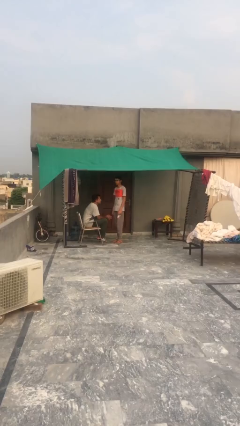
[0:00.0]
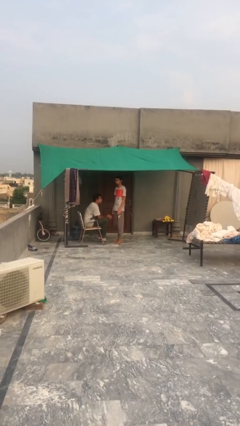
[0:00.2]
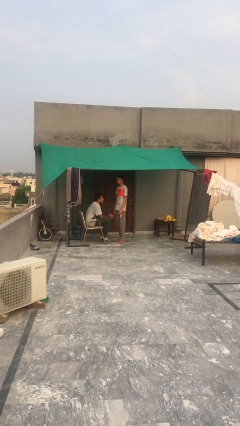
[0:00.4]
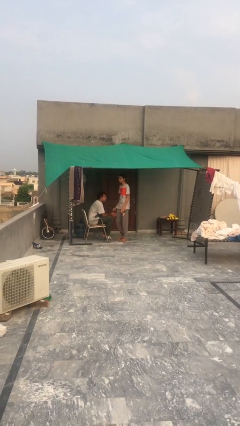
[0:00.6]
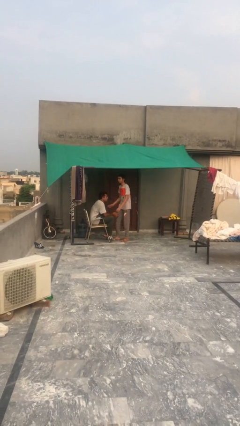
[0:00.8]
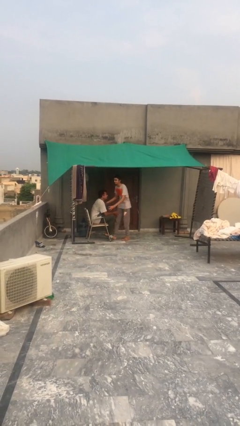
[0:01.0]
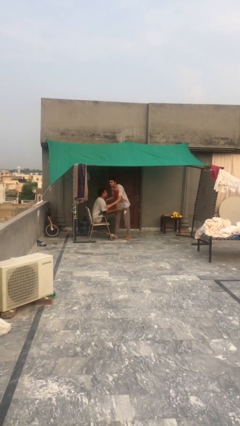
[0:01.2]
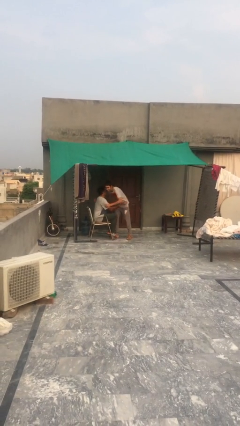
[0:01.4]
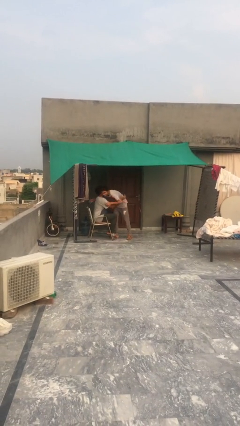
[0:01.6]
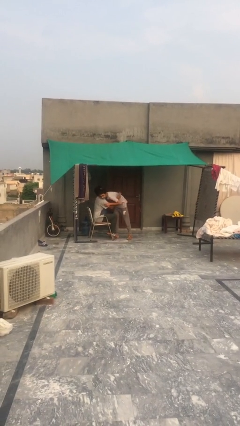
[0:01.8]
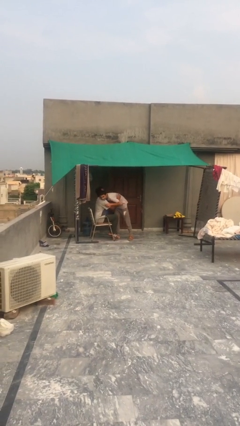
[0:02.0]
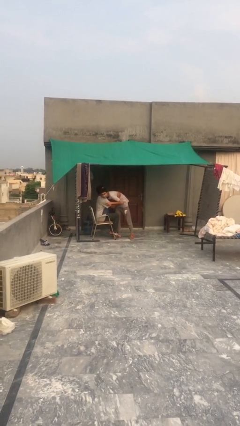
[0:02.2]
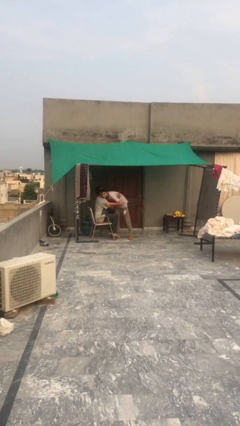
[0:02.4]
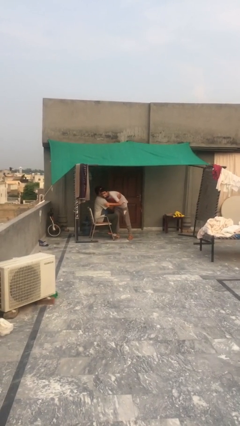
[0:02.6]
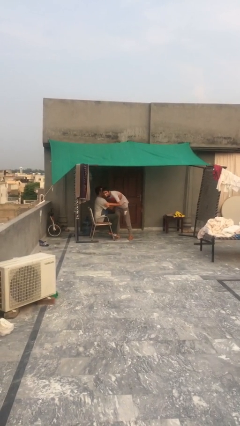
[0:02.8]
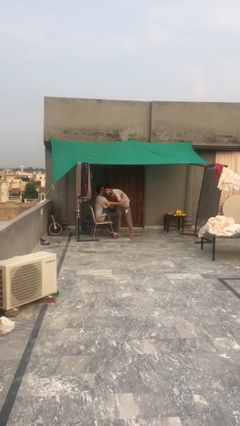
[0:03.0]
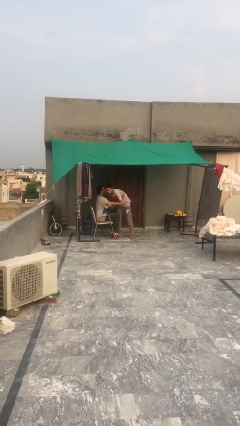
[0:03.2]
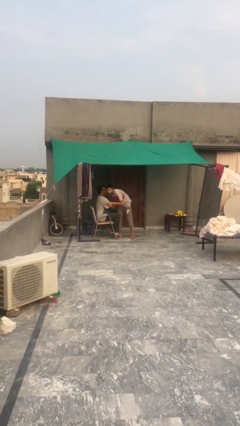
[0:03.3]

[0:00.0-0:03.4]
person embraces person

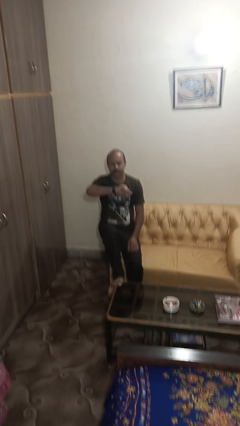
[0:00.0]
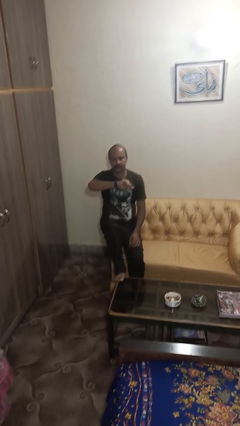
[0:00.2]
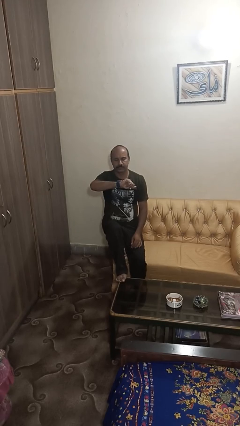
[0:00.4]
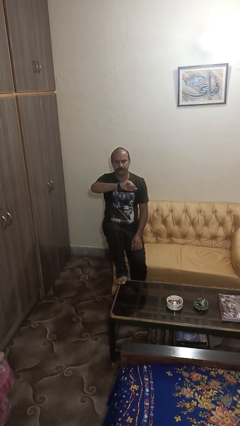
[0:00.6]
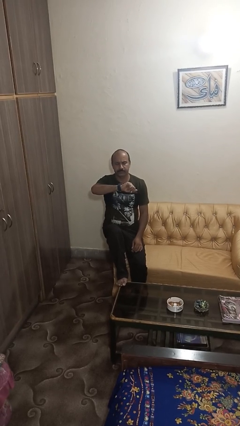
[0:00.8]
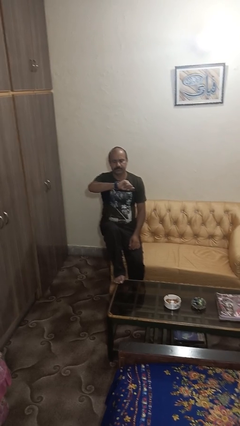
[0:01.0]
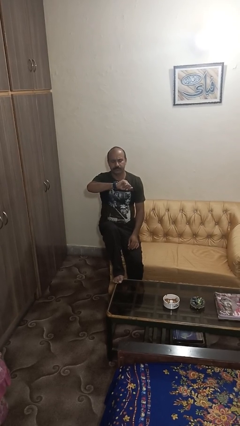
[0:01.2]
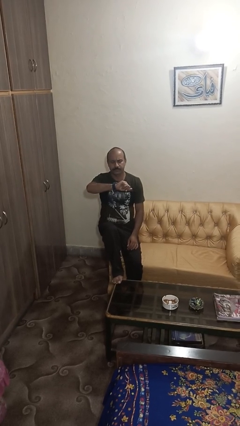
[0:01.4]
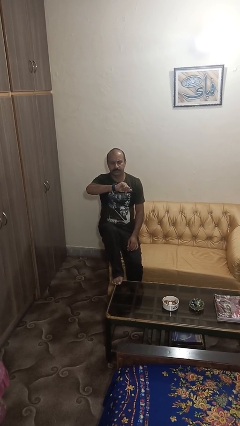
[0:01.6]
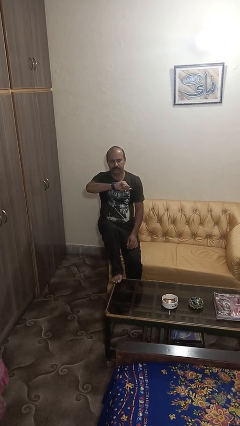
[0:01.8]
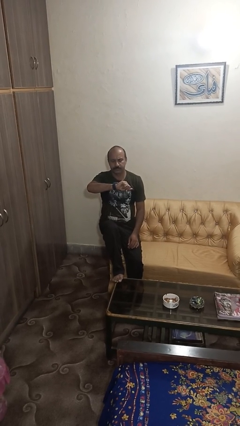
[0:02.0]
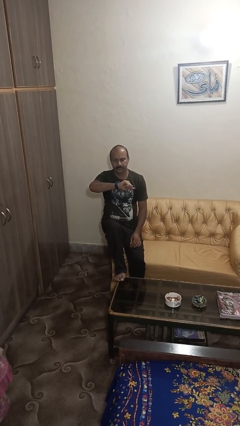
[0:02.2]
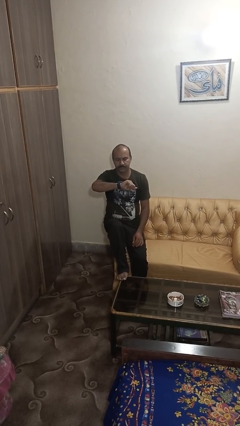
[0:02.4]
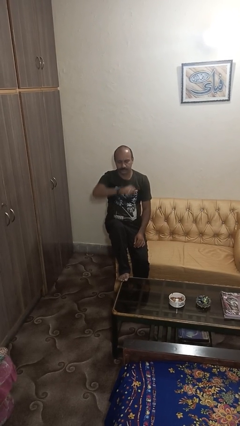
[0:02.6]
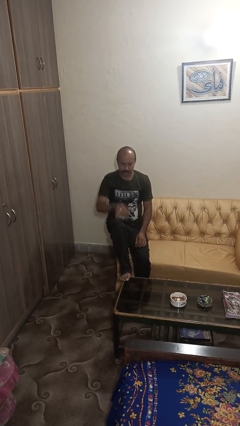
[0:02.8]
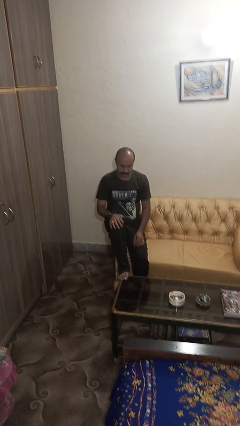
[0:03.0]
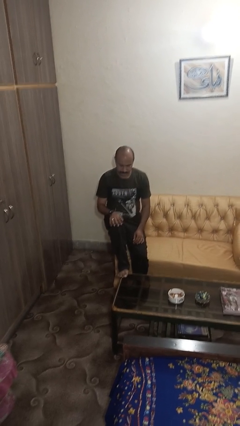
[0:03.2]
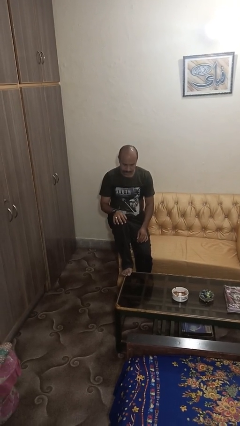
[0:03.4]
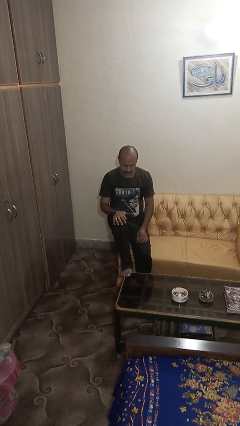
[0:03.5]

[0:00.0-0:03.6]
person looks at wristwatch

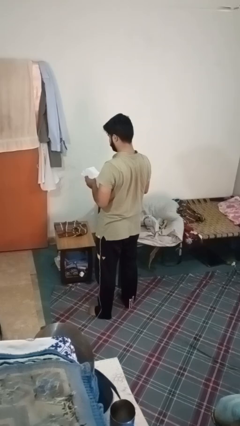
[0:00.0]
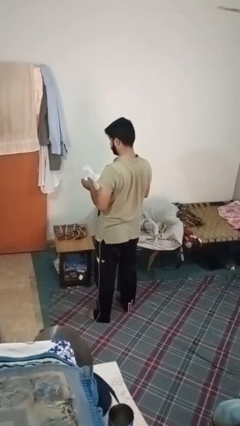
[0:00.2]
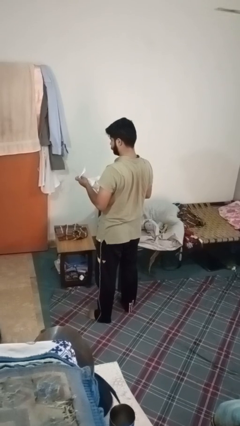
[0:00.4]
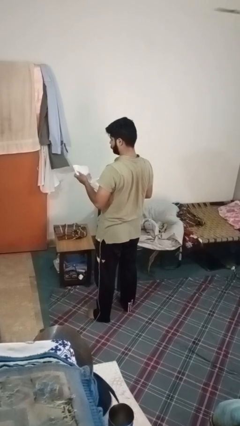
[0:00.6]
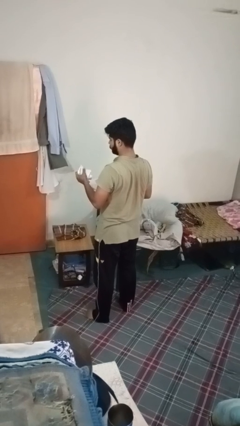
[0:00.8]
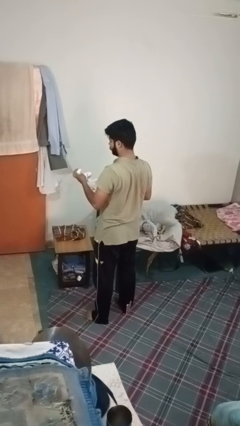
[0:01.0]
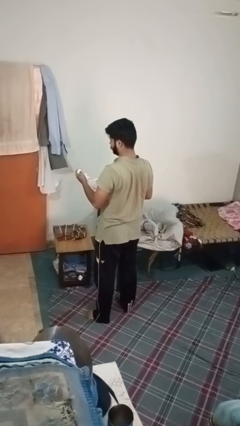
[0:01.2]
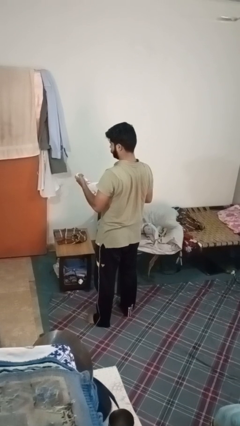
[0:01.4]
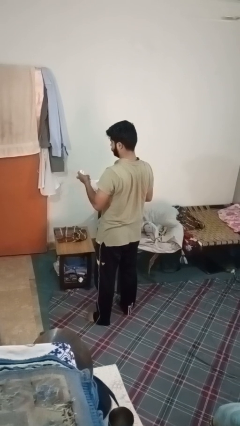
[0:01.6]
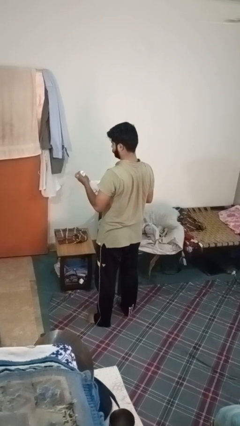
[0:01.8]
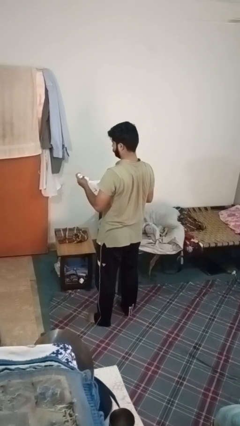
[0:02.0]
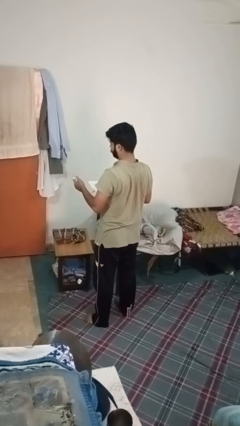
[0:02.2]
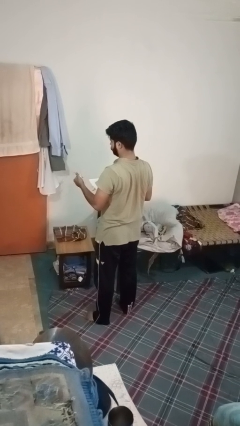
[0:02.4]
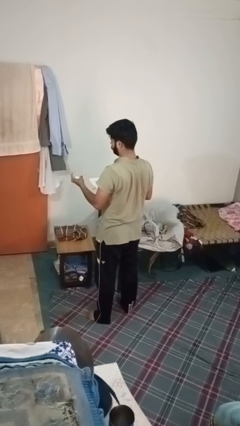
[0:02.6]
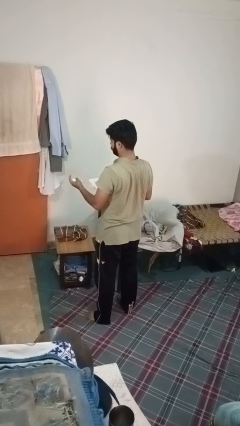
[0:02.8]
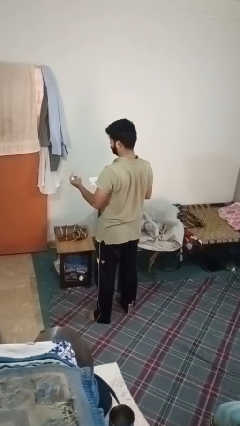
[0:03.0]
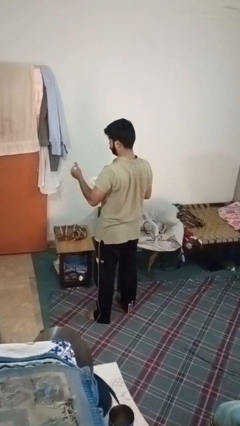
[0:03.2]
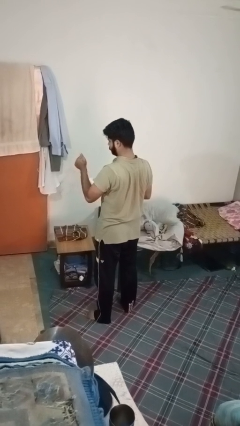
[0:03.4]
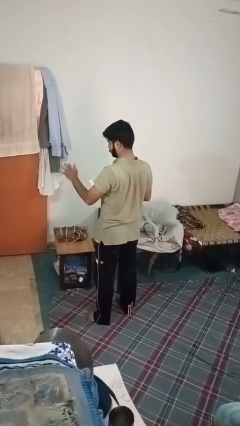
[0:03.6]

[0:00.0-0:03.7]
person crumples paper

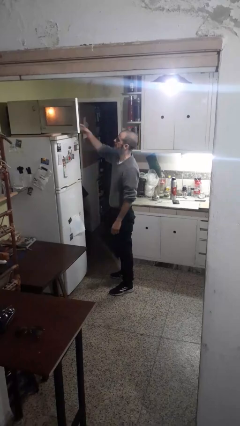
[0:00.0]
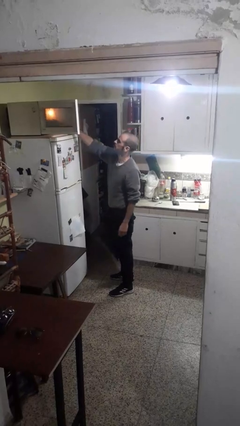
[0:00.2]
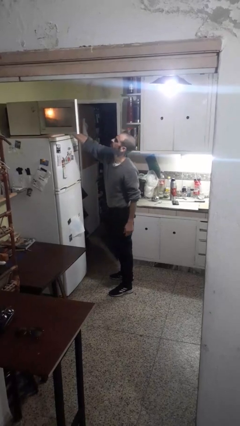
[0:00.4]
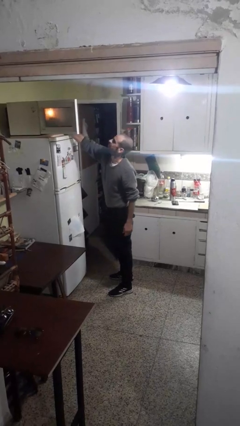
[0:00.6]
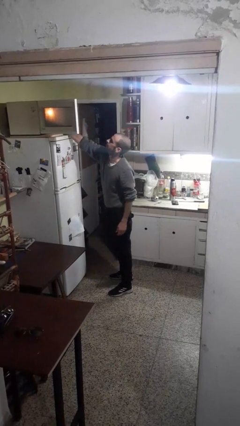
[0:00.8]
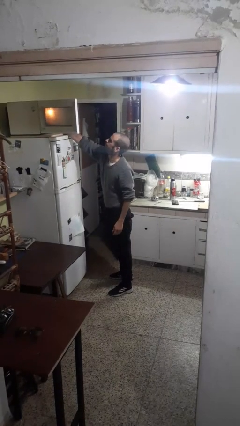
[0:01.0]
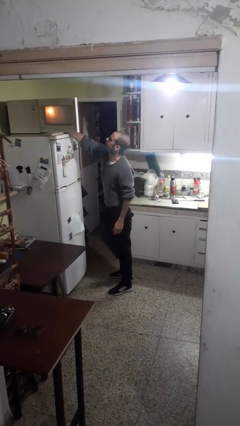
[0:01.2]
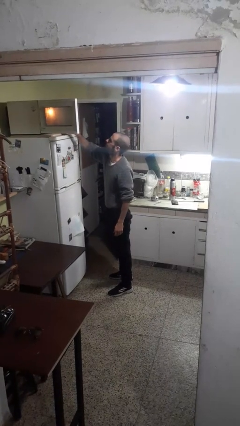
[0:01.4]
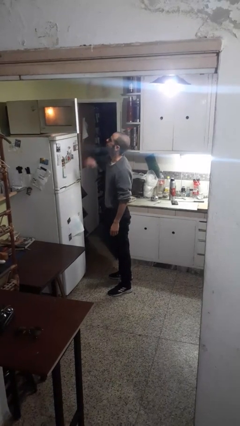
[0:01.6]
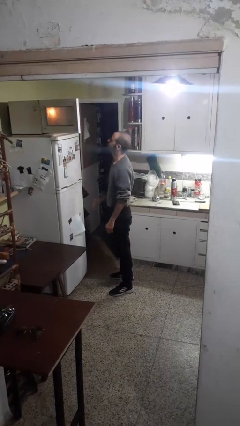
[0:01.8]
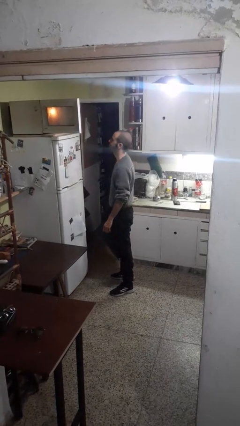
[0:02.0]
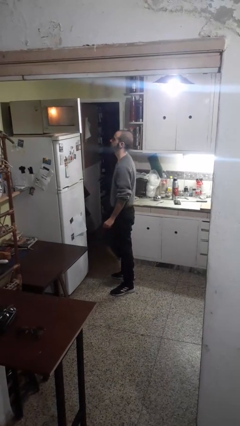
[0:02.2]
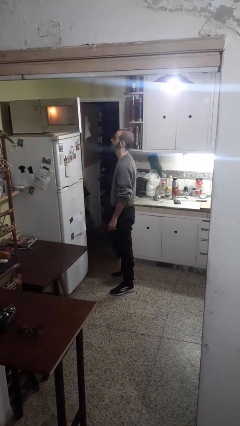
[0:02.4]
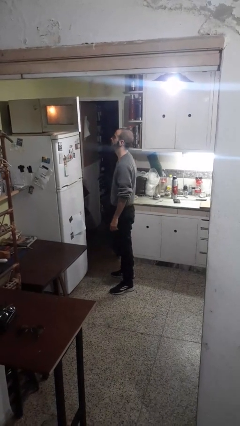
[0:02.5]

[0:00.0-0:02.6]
person puts object into microwave

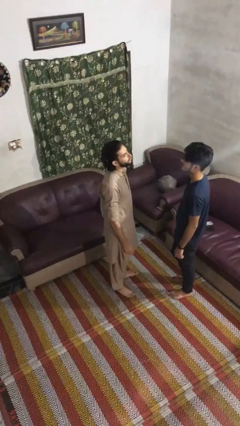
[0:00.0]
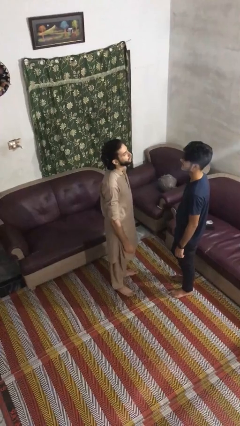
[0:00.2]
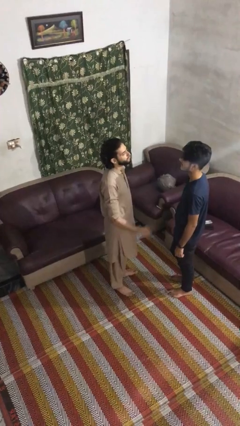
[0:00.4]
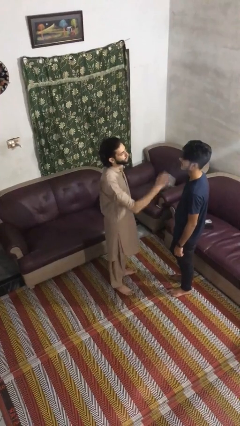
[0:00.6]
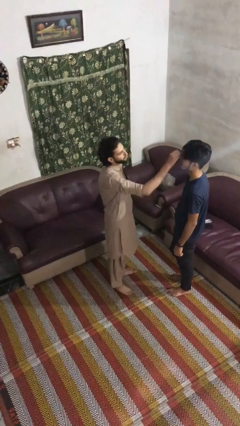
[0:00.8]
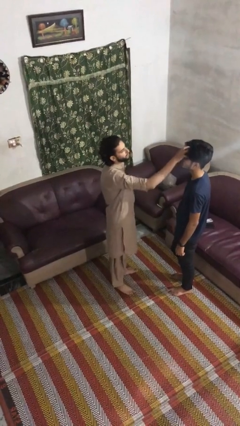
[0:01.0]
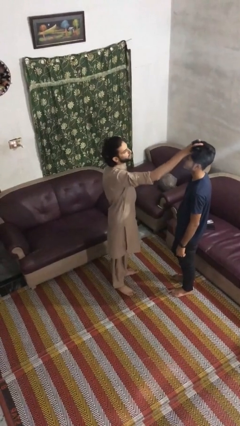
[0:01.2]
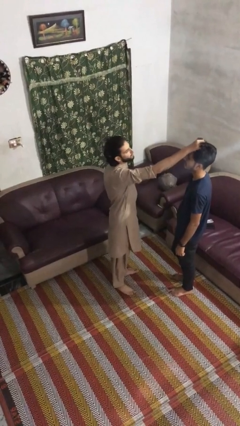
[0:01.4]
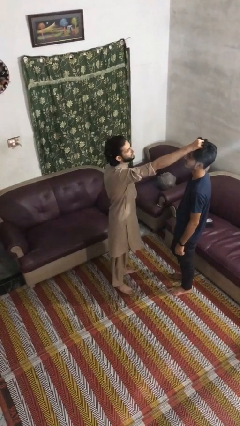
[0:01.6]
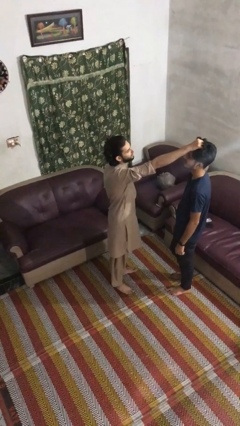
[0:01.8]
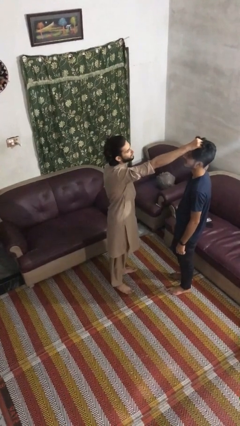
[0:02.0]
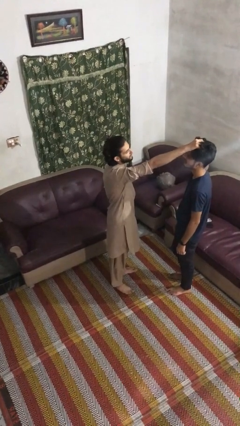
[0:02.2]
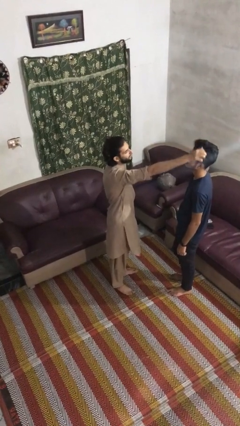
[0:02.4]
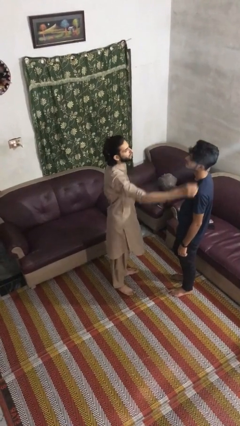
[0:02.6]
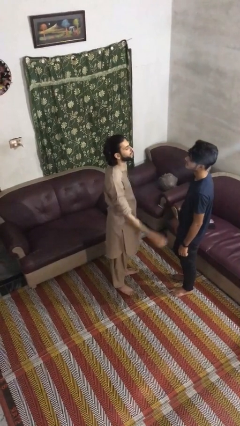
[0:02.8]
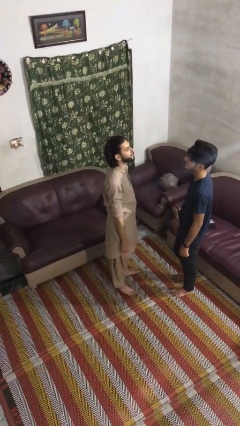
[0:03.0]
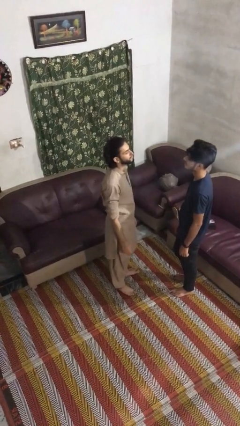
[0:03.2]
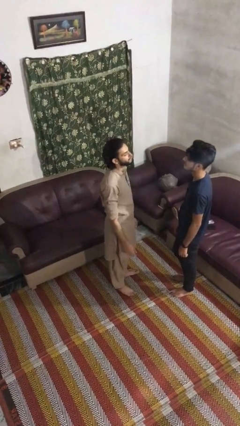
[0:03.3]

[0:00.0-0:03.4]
person grabs person by hair

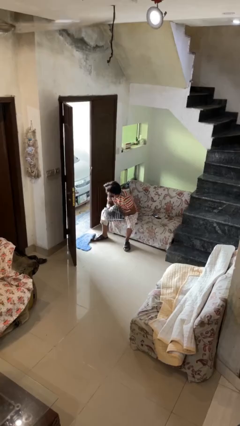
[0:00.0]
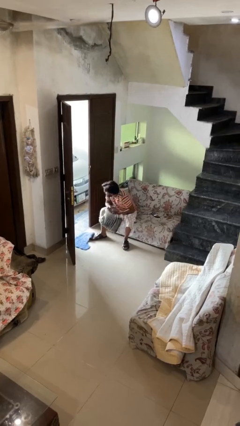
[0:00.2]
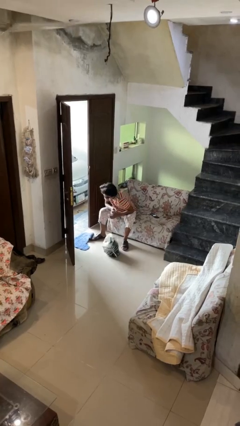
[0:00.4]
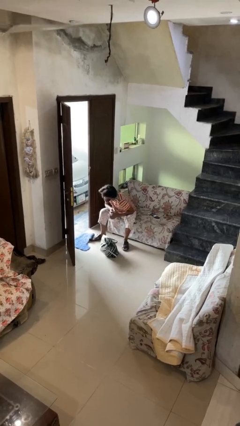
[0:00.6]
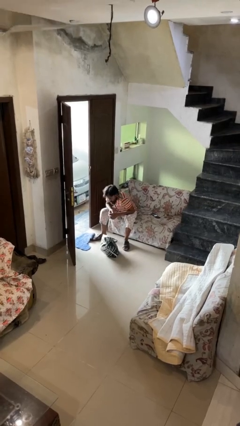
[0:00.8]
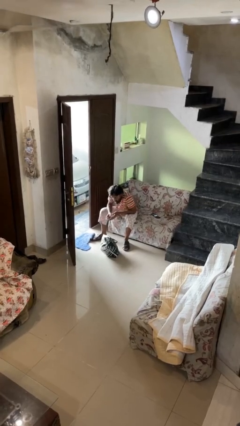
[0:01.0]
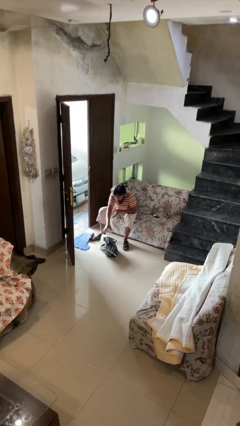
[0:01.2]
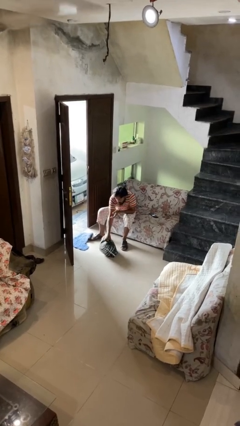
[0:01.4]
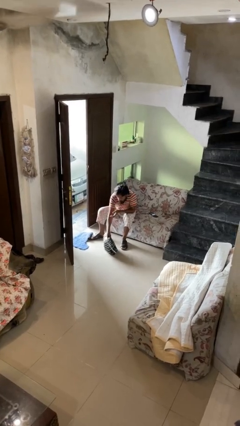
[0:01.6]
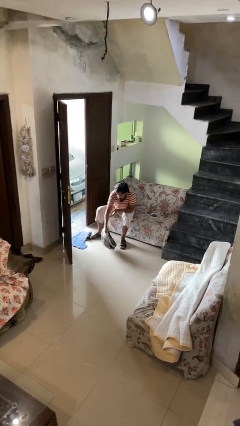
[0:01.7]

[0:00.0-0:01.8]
person drops object
